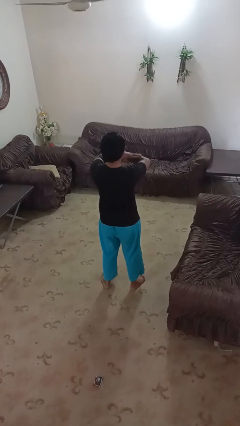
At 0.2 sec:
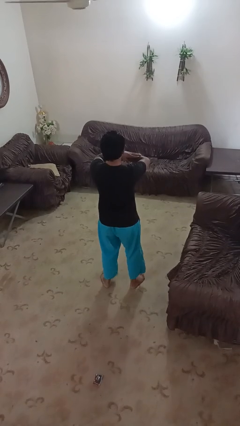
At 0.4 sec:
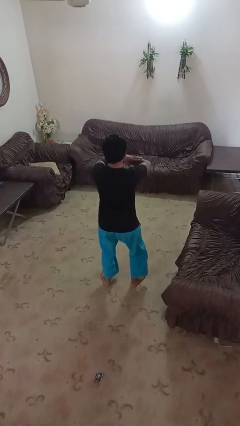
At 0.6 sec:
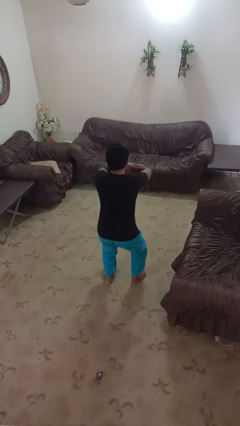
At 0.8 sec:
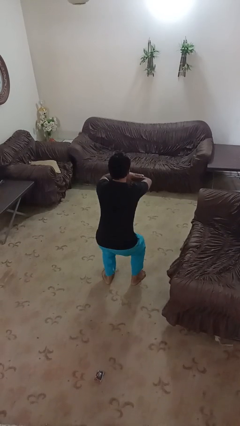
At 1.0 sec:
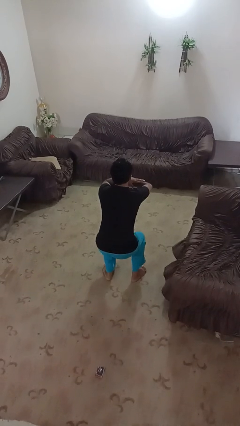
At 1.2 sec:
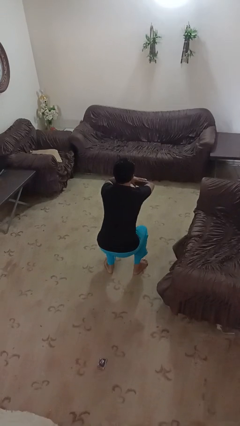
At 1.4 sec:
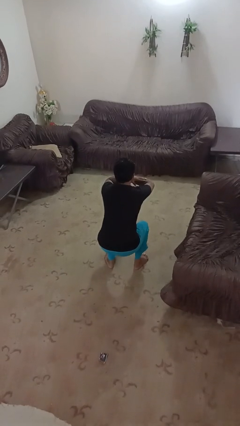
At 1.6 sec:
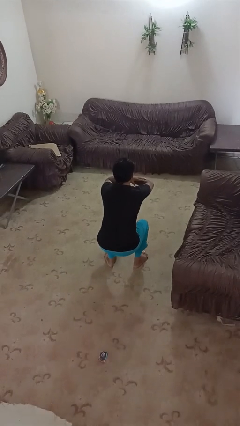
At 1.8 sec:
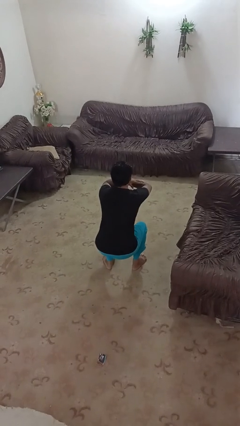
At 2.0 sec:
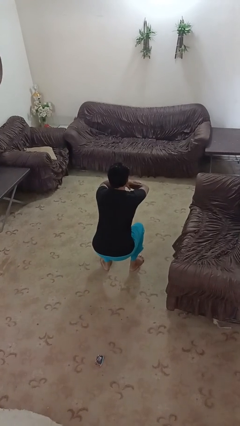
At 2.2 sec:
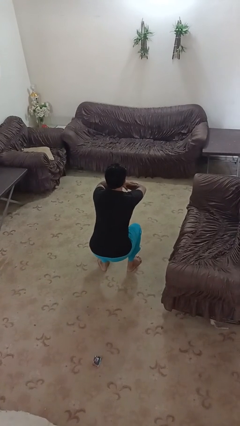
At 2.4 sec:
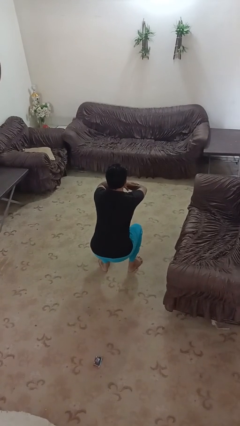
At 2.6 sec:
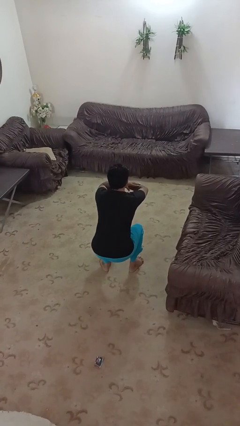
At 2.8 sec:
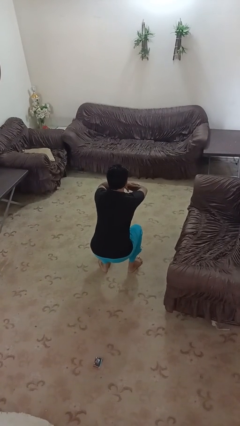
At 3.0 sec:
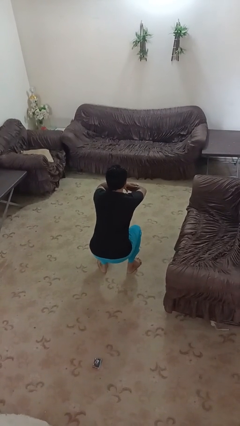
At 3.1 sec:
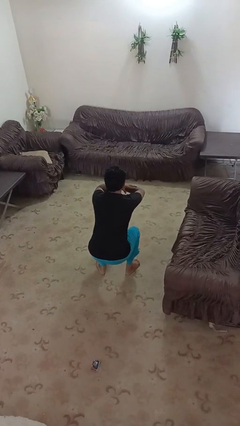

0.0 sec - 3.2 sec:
person squats

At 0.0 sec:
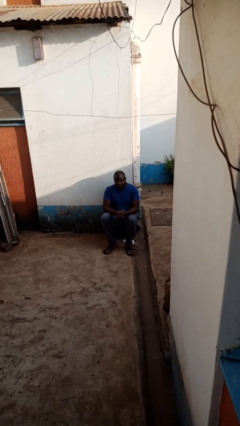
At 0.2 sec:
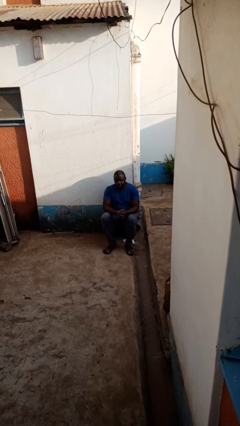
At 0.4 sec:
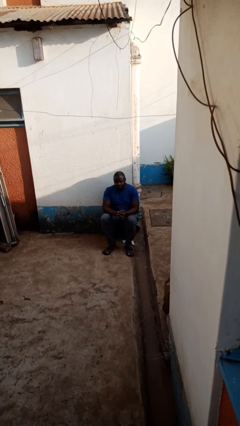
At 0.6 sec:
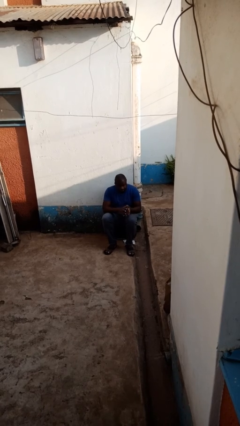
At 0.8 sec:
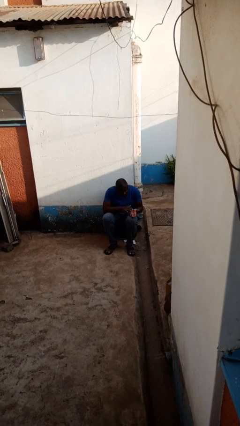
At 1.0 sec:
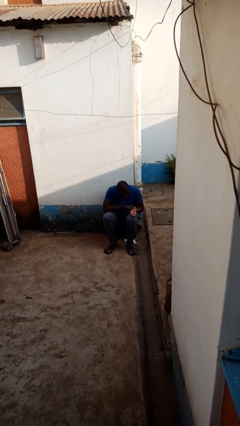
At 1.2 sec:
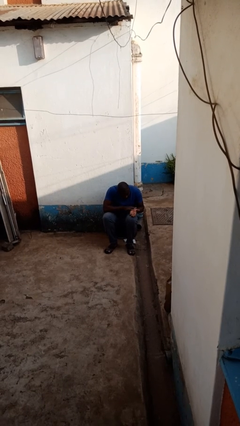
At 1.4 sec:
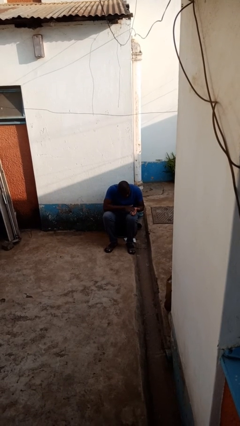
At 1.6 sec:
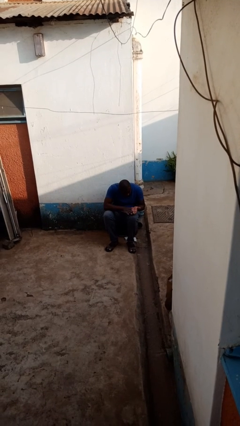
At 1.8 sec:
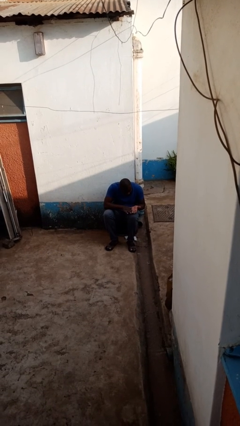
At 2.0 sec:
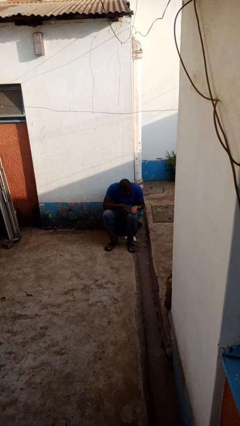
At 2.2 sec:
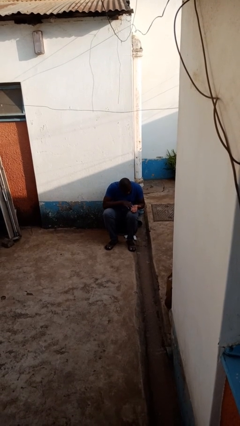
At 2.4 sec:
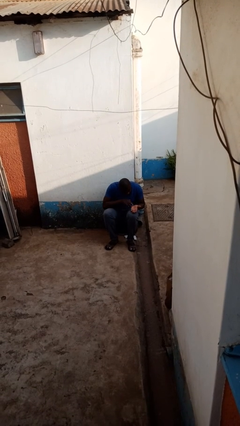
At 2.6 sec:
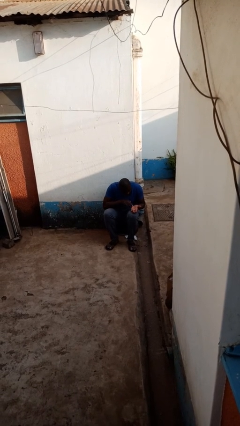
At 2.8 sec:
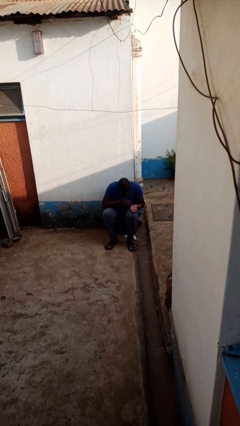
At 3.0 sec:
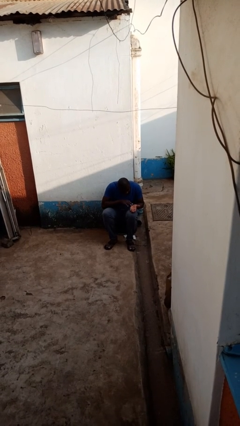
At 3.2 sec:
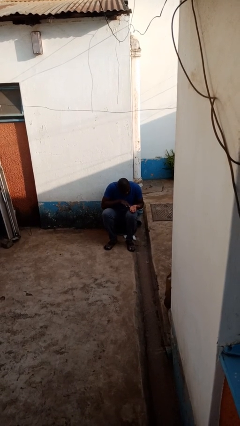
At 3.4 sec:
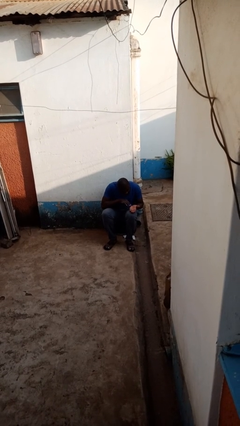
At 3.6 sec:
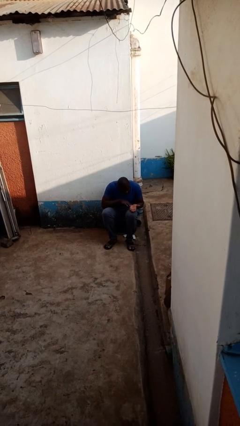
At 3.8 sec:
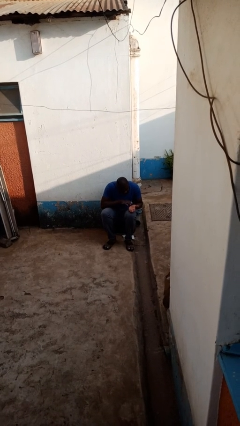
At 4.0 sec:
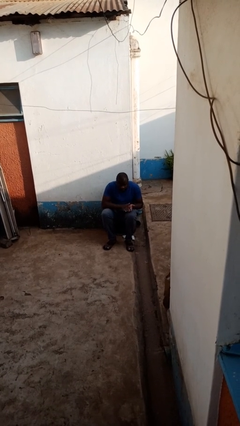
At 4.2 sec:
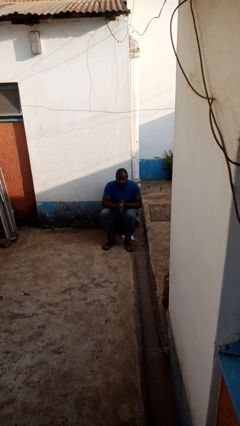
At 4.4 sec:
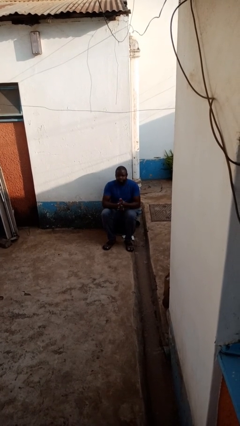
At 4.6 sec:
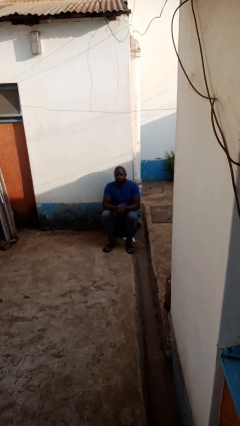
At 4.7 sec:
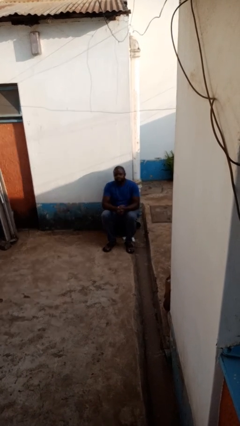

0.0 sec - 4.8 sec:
person looks at hands in lap

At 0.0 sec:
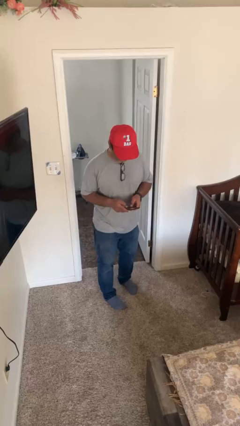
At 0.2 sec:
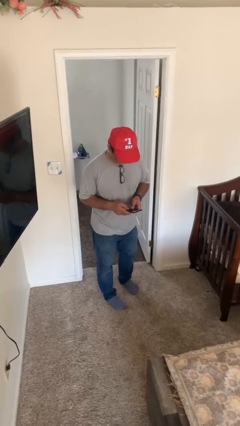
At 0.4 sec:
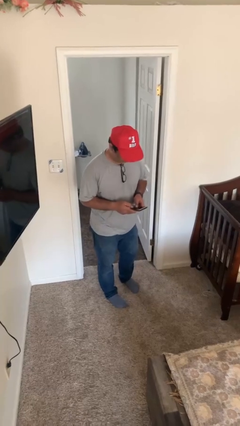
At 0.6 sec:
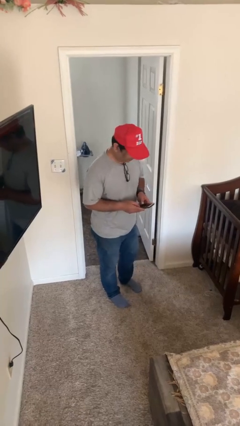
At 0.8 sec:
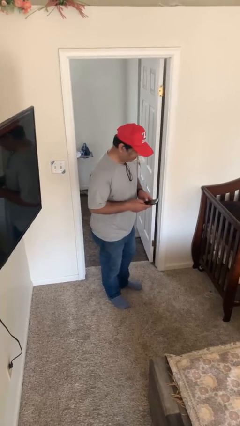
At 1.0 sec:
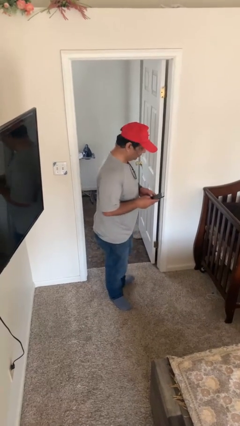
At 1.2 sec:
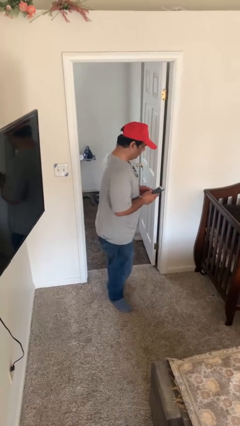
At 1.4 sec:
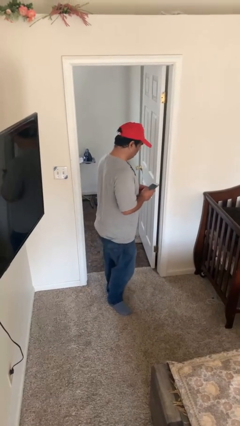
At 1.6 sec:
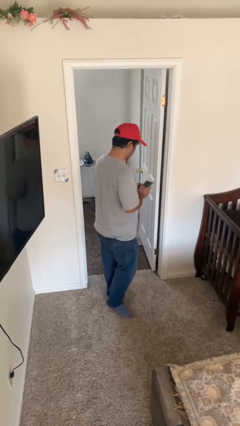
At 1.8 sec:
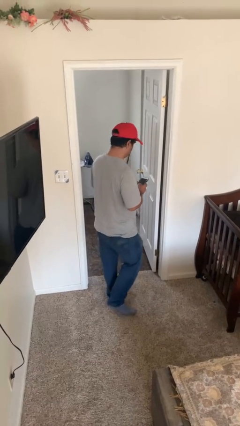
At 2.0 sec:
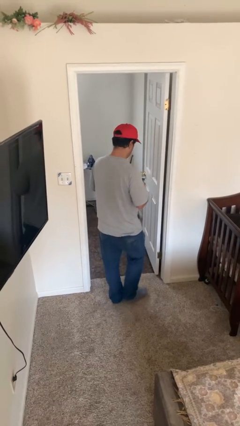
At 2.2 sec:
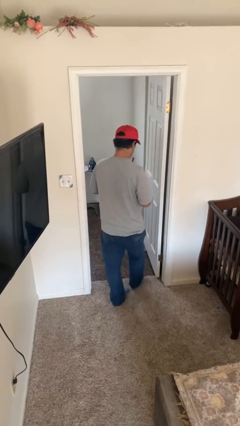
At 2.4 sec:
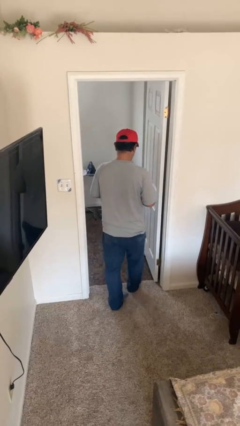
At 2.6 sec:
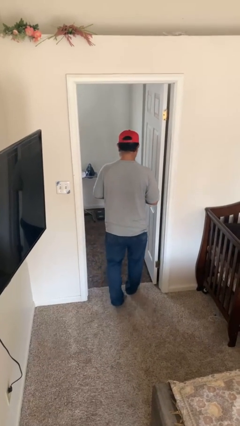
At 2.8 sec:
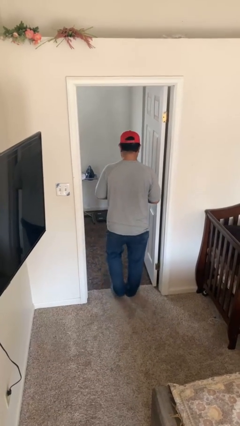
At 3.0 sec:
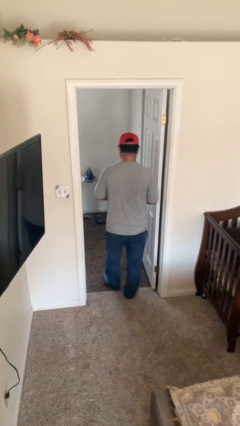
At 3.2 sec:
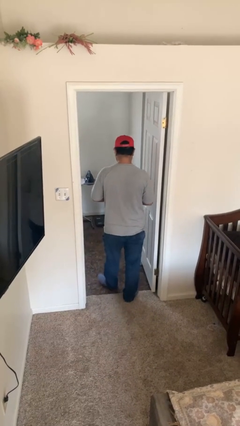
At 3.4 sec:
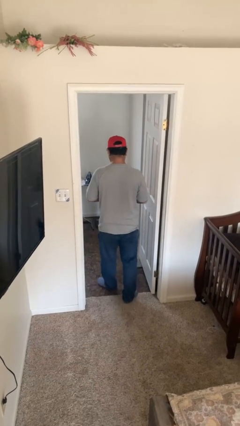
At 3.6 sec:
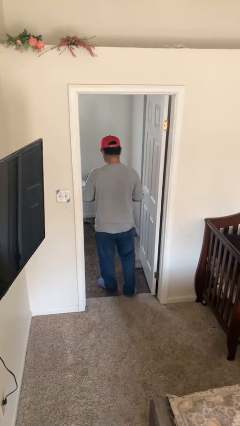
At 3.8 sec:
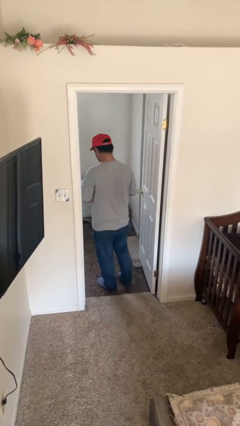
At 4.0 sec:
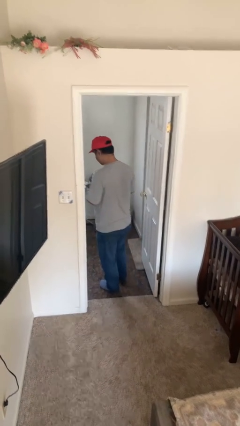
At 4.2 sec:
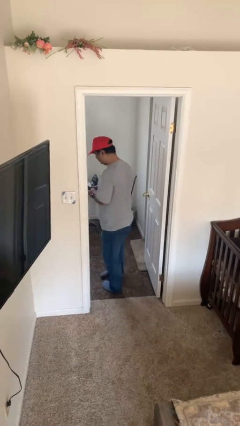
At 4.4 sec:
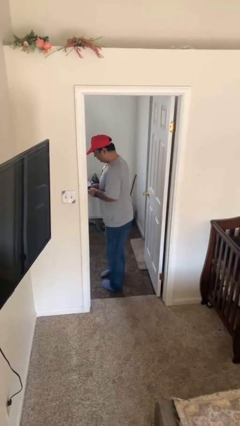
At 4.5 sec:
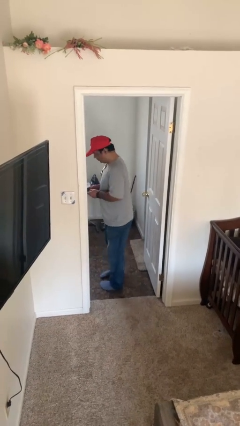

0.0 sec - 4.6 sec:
person exits scene through structure

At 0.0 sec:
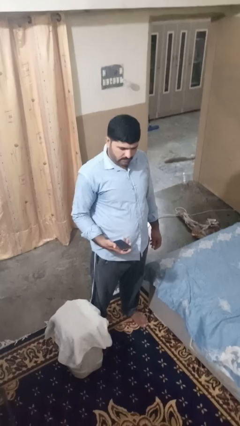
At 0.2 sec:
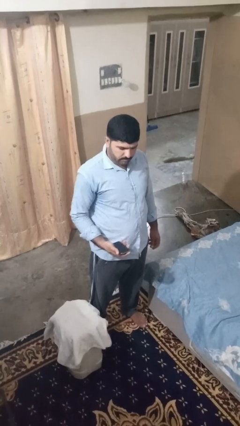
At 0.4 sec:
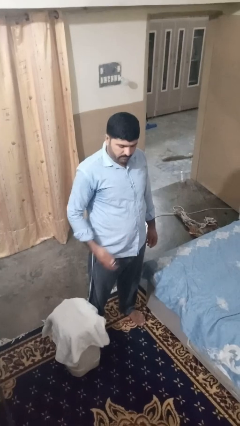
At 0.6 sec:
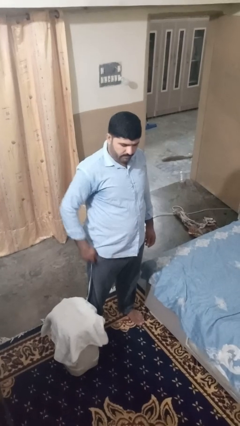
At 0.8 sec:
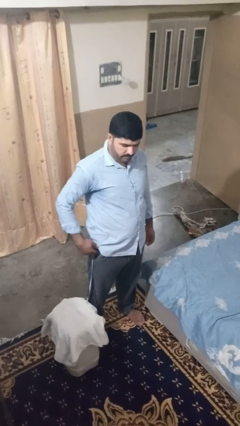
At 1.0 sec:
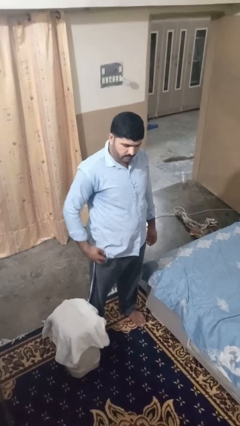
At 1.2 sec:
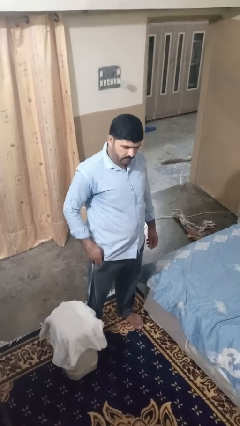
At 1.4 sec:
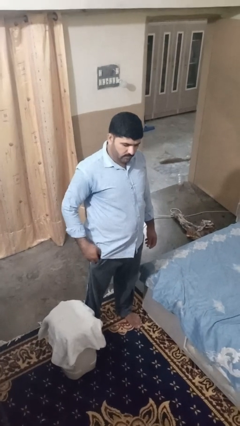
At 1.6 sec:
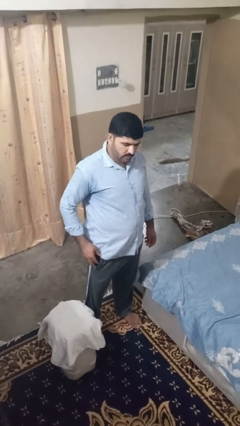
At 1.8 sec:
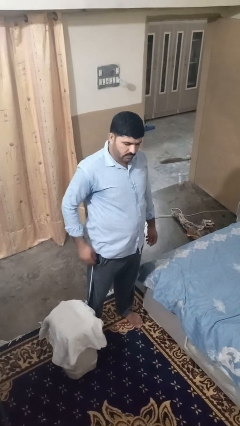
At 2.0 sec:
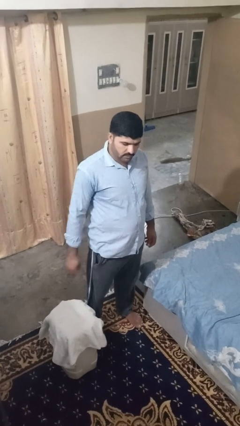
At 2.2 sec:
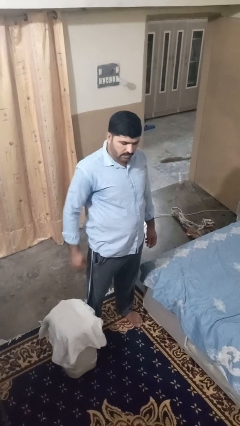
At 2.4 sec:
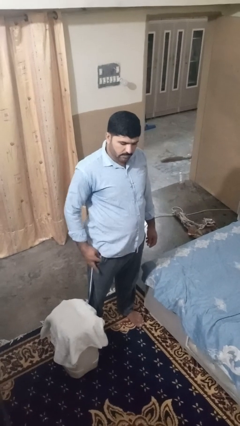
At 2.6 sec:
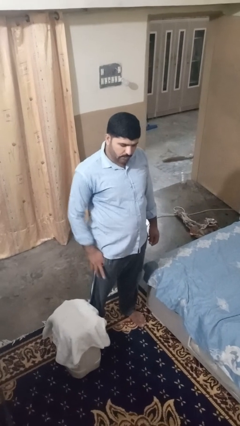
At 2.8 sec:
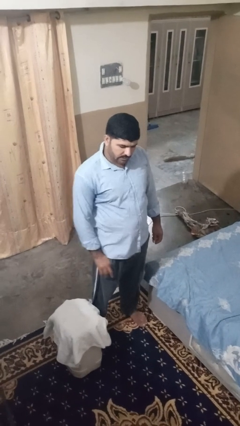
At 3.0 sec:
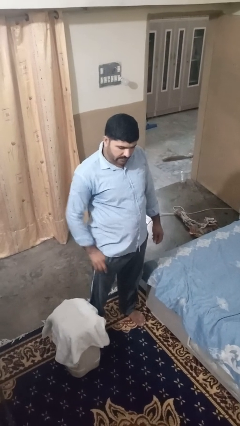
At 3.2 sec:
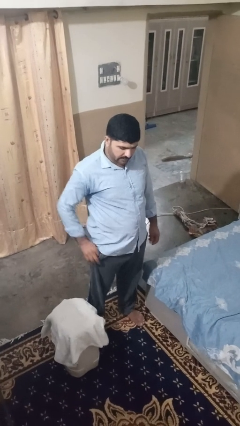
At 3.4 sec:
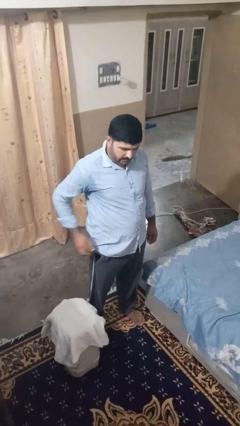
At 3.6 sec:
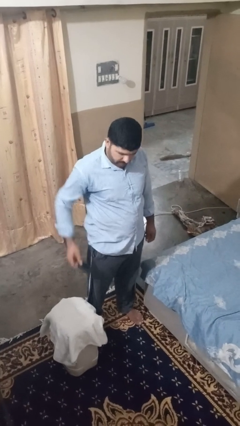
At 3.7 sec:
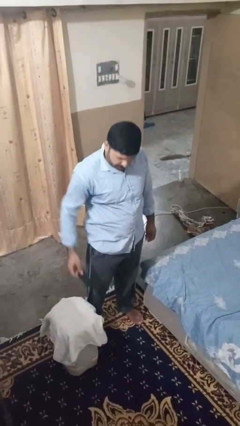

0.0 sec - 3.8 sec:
person puts phone into pocket

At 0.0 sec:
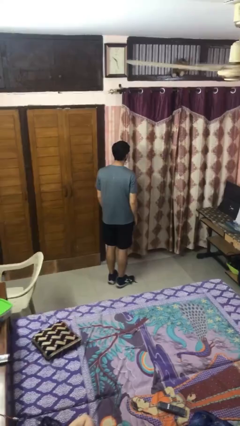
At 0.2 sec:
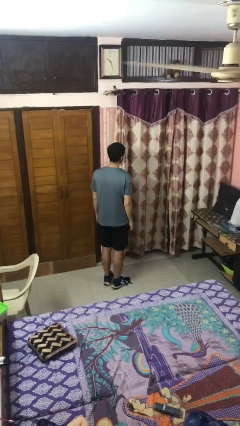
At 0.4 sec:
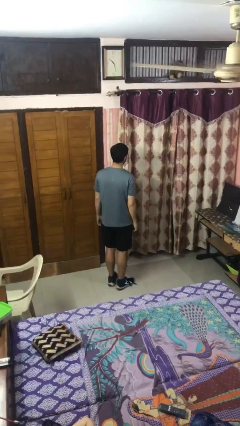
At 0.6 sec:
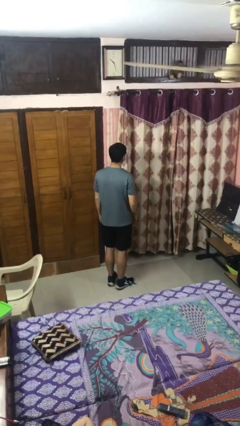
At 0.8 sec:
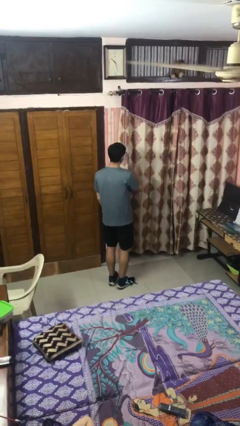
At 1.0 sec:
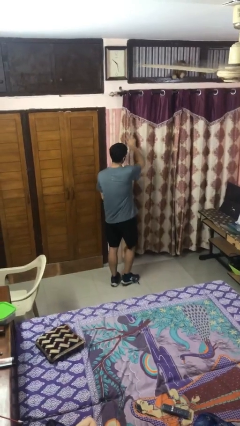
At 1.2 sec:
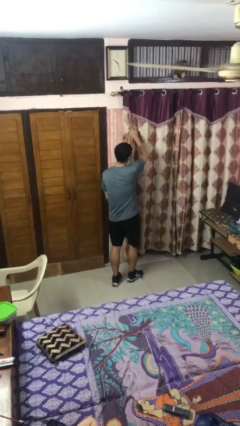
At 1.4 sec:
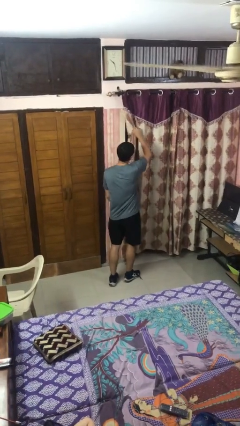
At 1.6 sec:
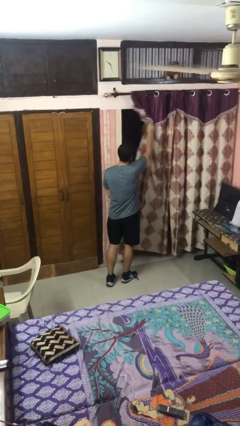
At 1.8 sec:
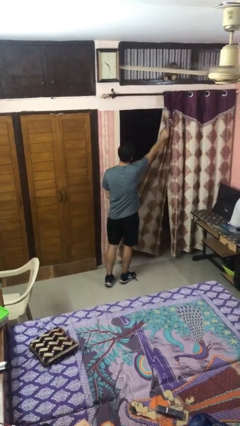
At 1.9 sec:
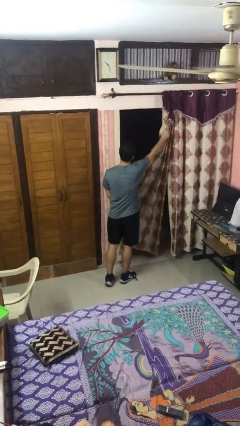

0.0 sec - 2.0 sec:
person opens curtains
